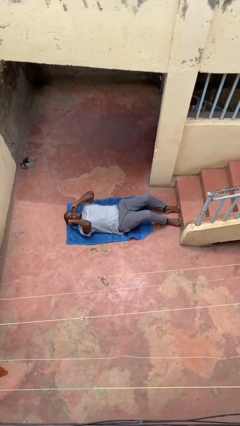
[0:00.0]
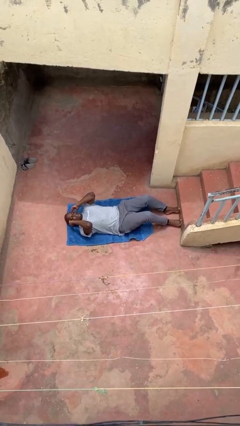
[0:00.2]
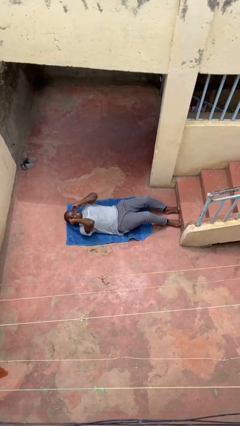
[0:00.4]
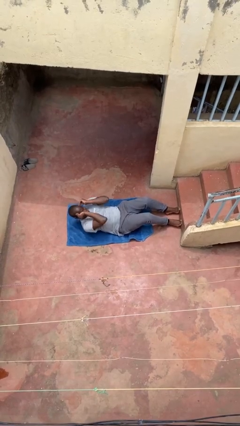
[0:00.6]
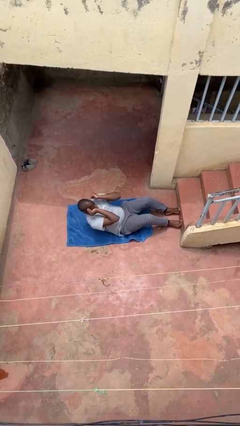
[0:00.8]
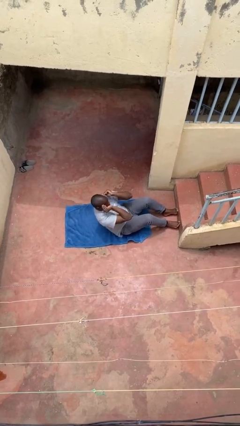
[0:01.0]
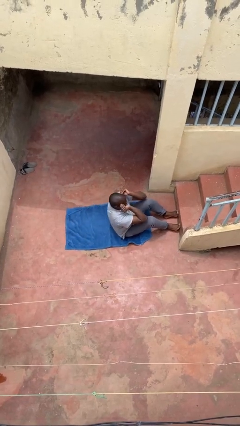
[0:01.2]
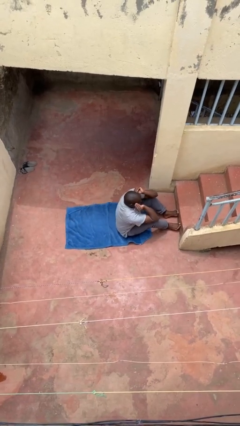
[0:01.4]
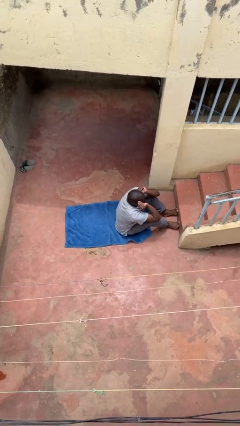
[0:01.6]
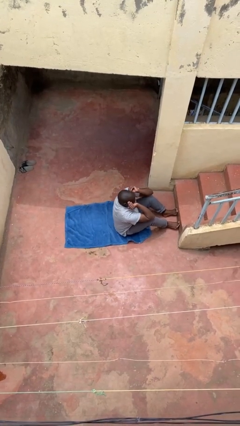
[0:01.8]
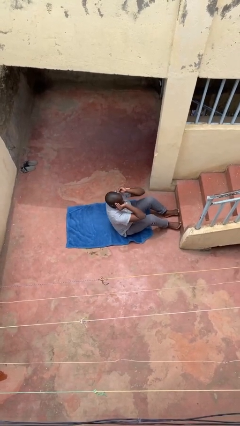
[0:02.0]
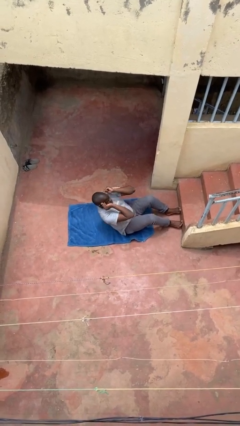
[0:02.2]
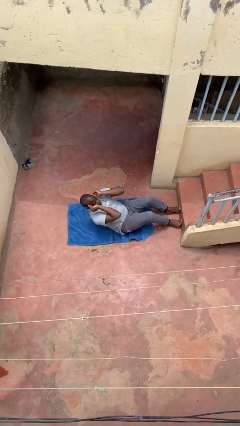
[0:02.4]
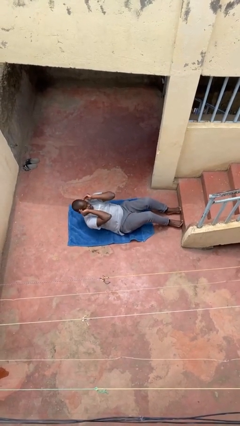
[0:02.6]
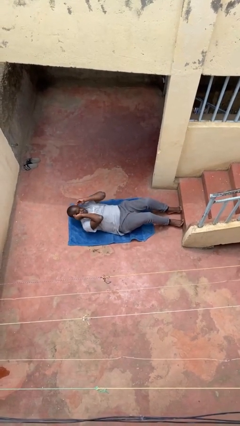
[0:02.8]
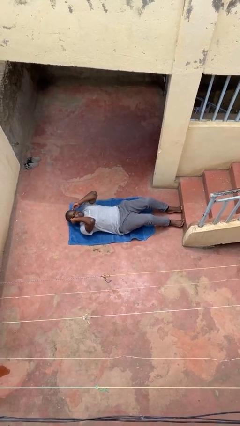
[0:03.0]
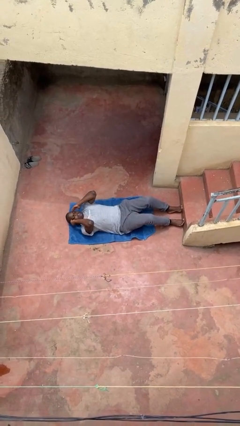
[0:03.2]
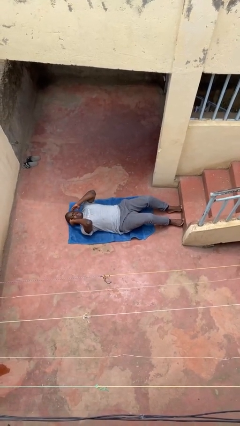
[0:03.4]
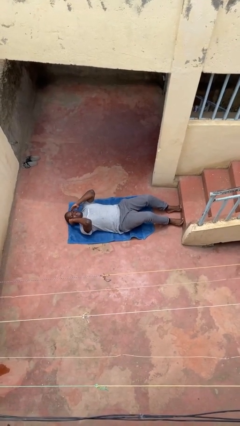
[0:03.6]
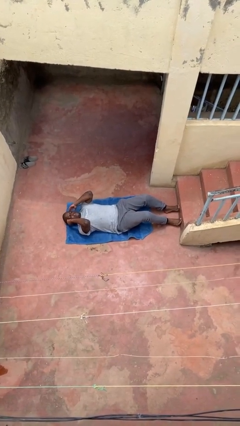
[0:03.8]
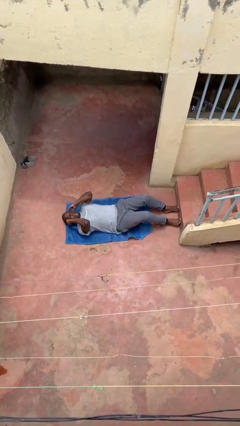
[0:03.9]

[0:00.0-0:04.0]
person exercises with situp

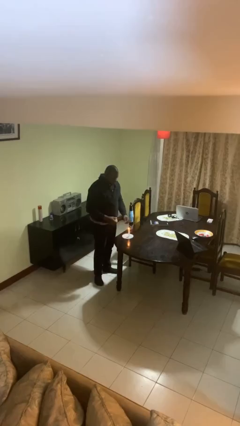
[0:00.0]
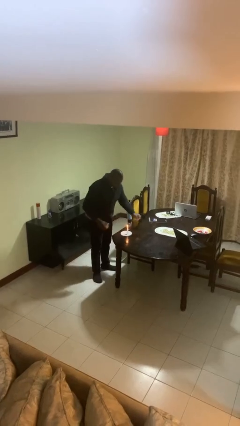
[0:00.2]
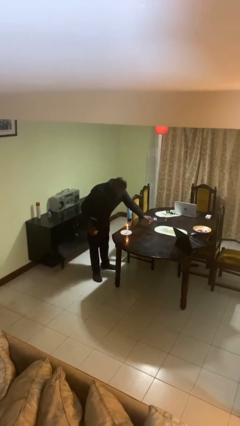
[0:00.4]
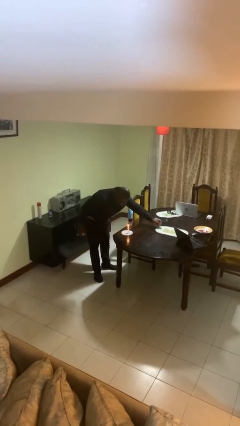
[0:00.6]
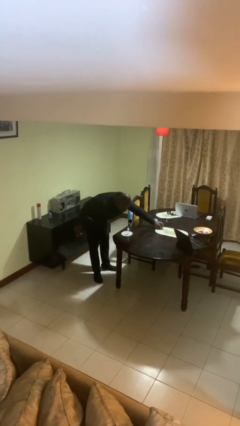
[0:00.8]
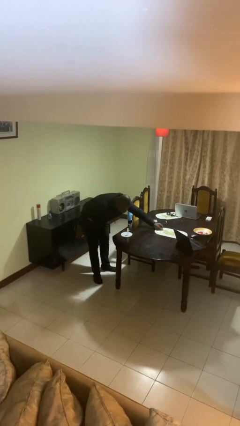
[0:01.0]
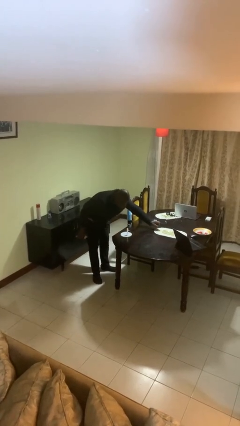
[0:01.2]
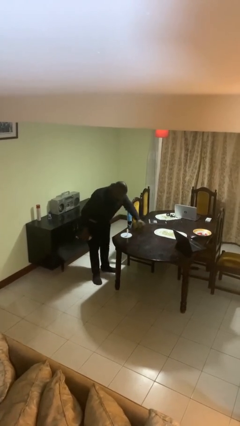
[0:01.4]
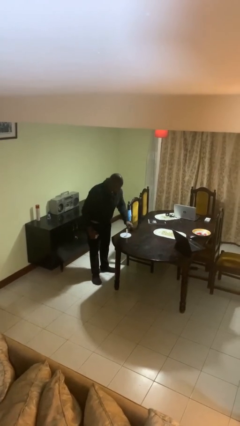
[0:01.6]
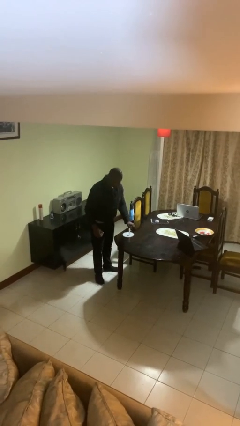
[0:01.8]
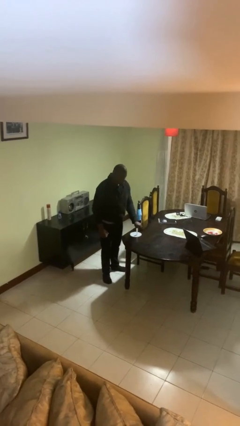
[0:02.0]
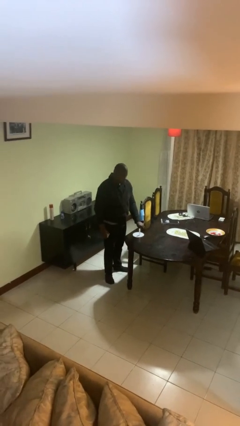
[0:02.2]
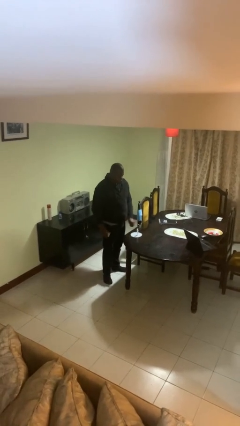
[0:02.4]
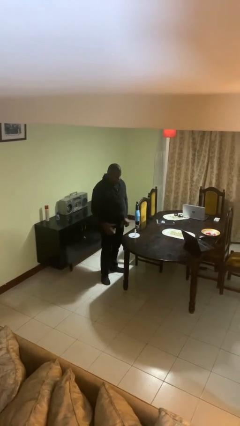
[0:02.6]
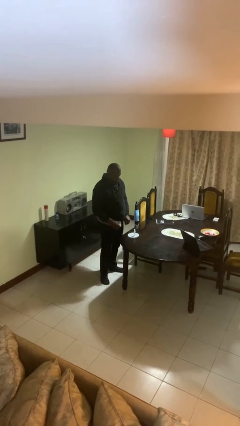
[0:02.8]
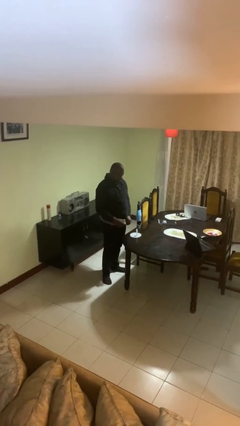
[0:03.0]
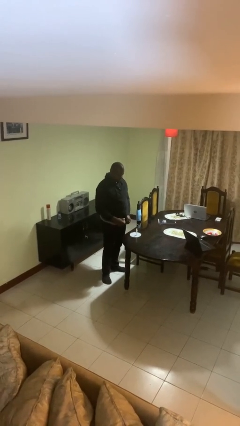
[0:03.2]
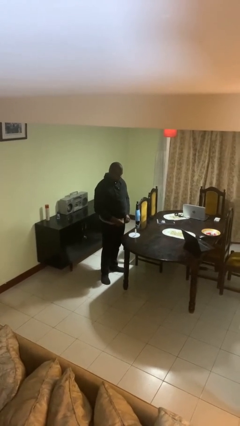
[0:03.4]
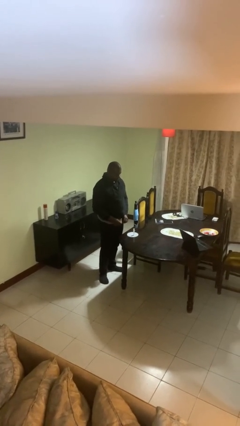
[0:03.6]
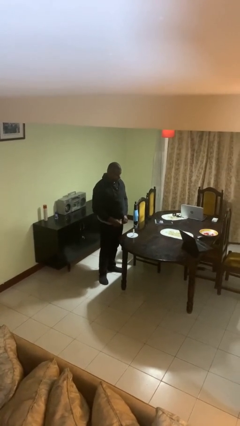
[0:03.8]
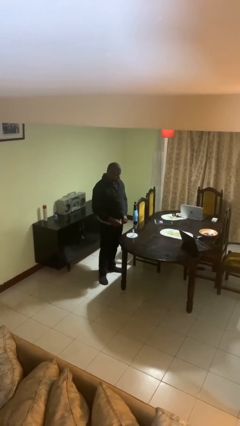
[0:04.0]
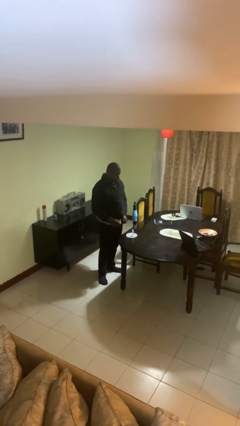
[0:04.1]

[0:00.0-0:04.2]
person extinguishes candle

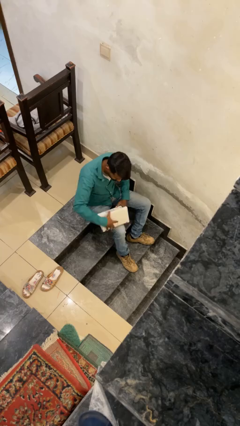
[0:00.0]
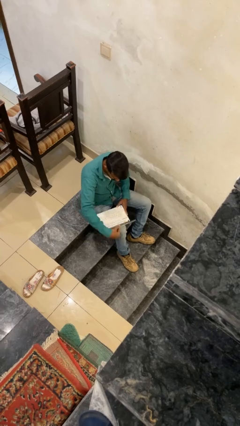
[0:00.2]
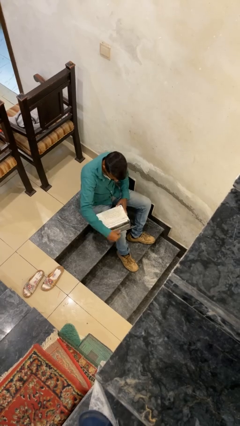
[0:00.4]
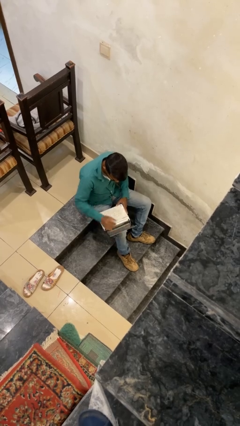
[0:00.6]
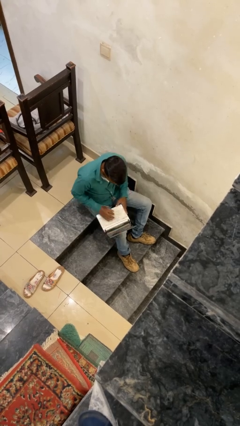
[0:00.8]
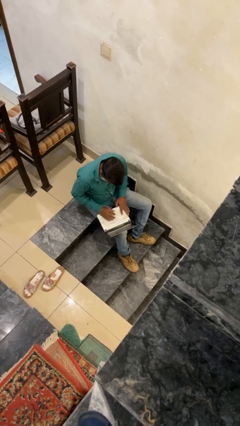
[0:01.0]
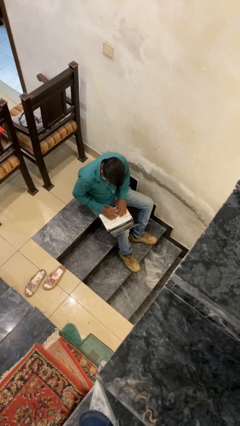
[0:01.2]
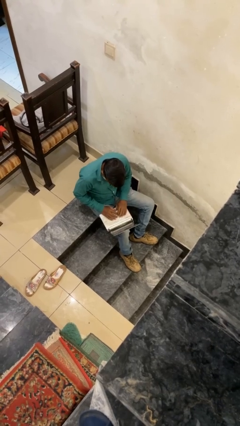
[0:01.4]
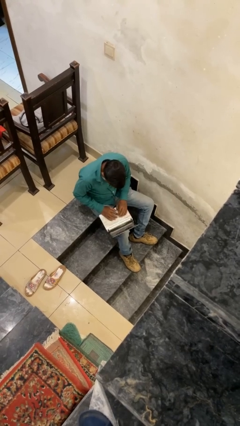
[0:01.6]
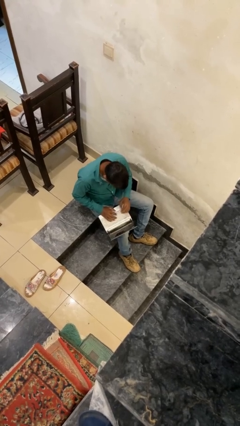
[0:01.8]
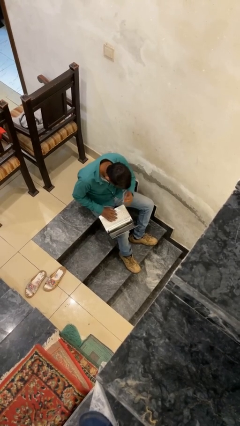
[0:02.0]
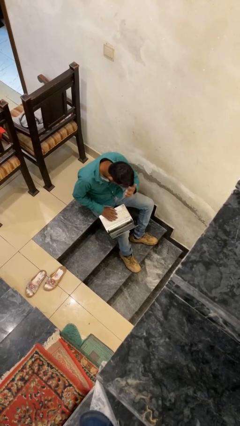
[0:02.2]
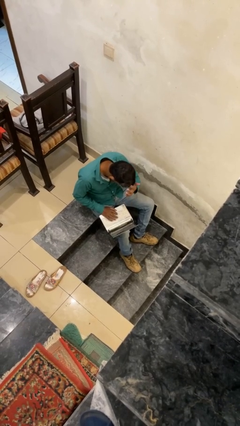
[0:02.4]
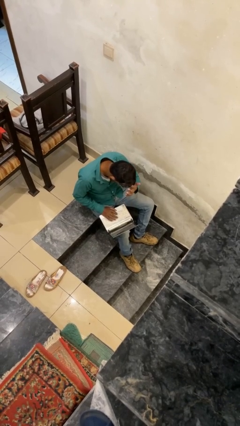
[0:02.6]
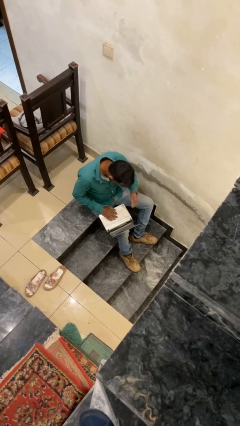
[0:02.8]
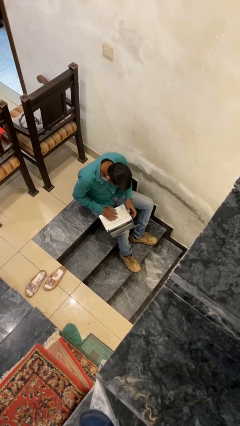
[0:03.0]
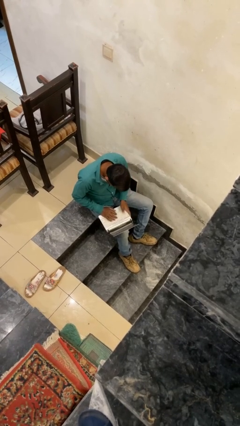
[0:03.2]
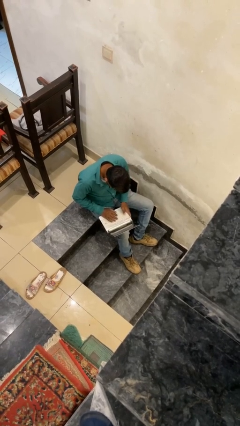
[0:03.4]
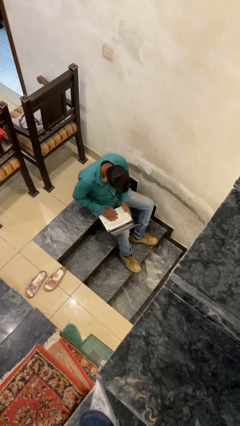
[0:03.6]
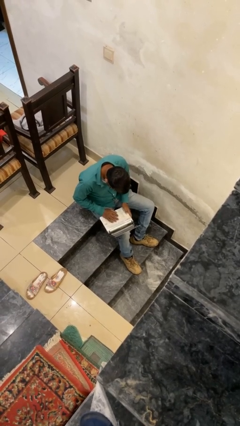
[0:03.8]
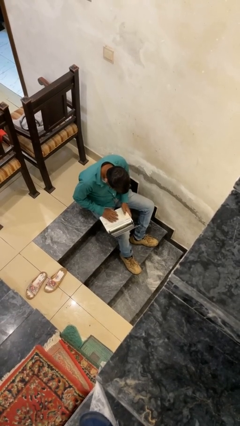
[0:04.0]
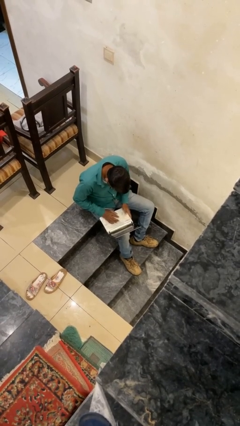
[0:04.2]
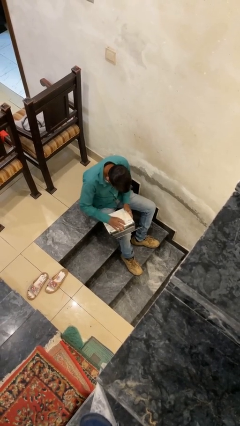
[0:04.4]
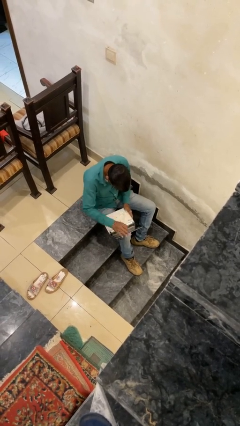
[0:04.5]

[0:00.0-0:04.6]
person interacts with laptop

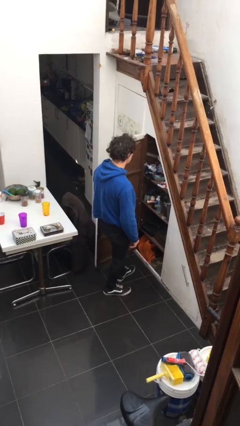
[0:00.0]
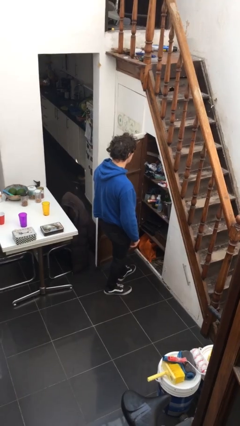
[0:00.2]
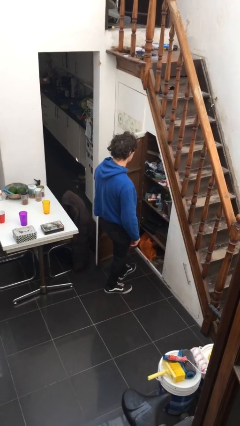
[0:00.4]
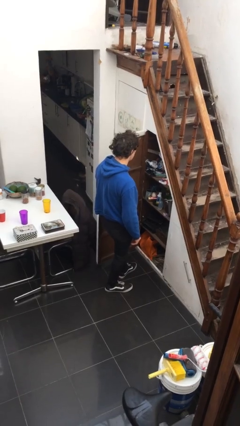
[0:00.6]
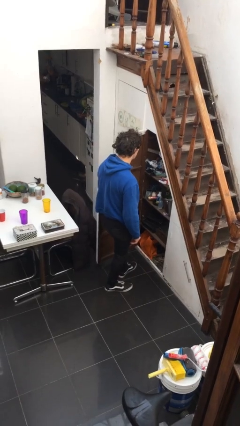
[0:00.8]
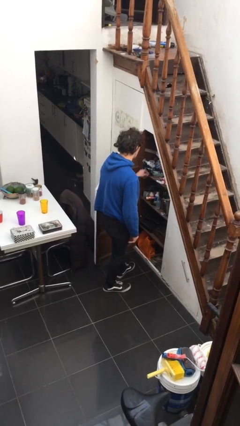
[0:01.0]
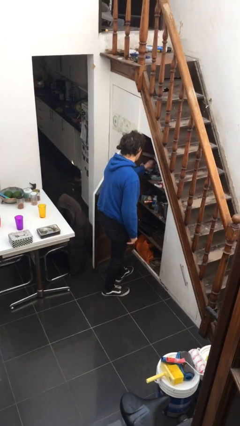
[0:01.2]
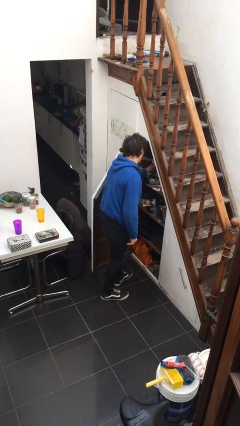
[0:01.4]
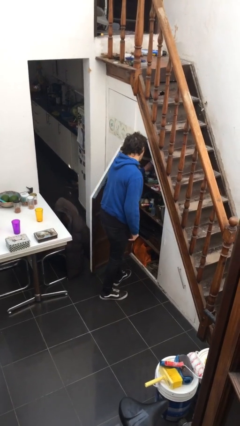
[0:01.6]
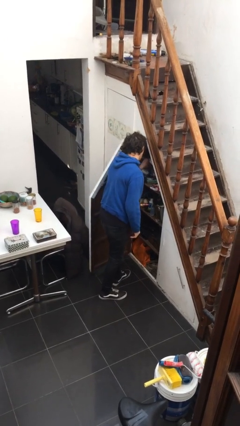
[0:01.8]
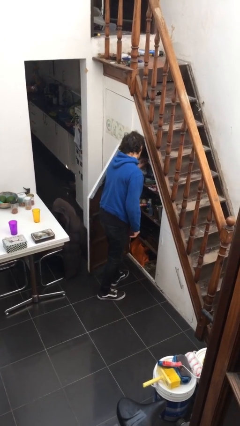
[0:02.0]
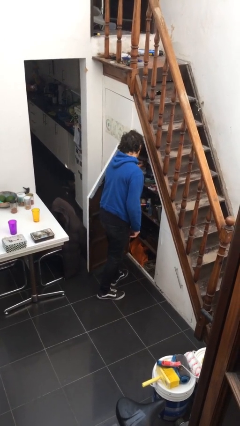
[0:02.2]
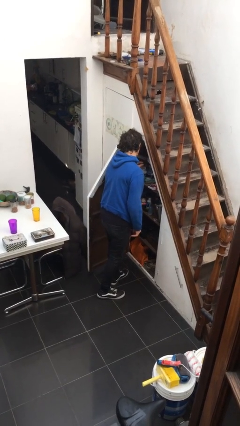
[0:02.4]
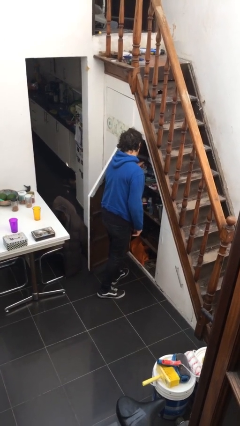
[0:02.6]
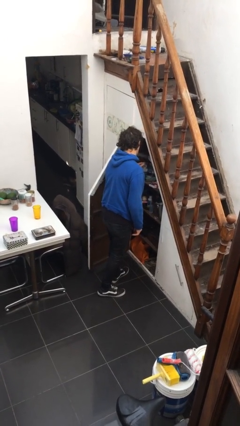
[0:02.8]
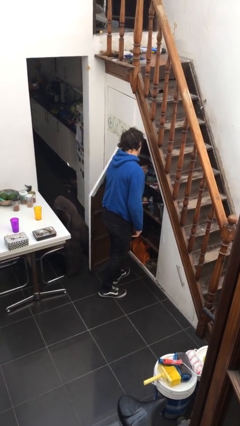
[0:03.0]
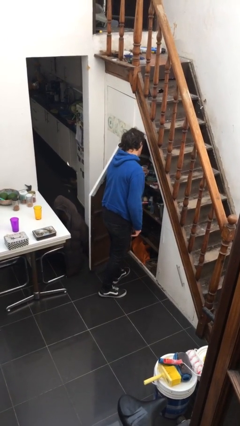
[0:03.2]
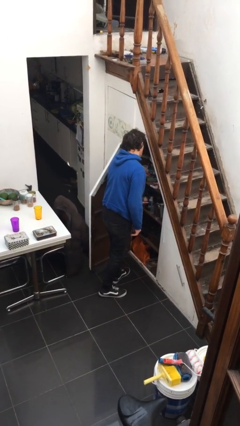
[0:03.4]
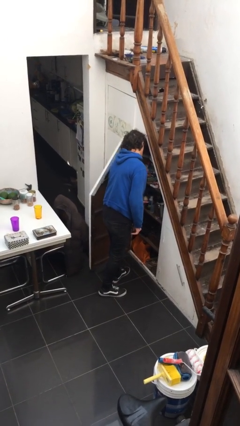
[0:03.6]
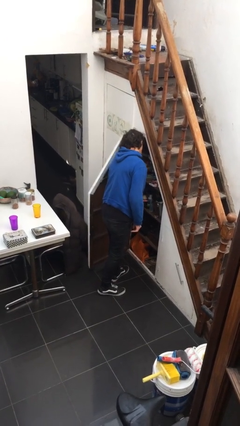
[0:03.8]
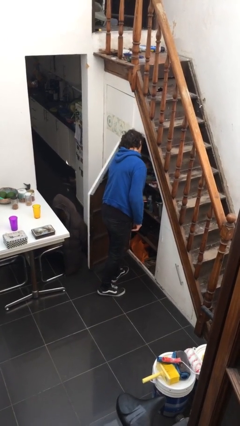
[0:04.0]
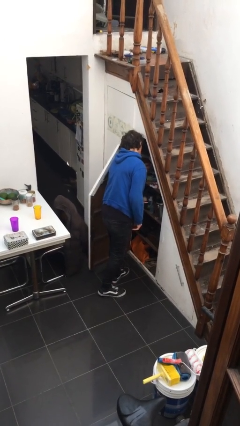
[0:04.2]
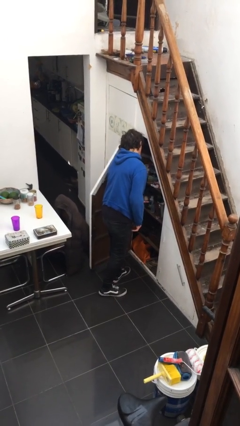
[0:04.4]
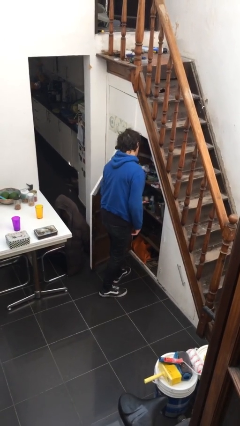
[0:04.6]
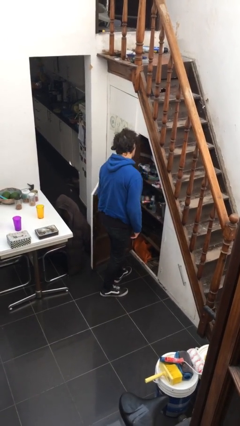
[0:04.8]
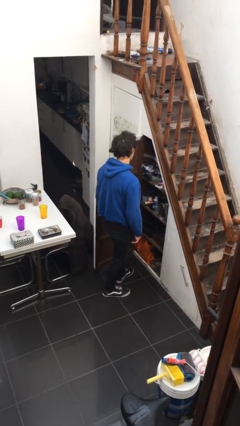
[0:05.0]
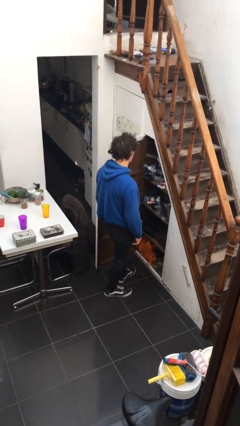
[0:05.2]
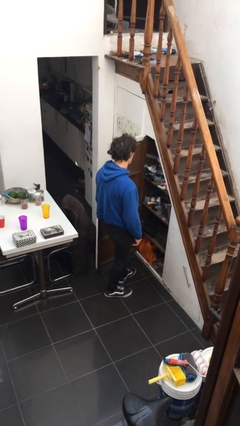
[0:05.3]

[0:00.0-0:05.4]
person searches in cabinet
